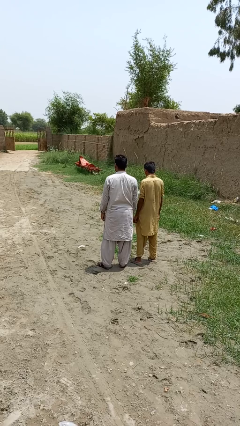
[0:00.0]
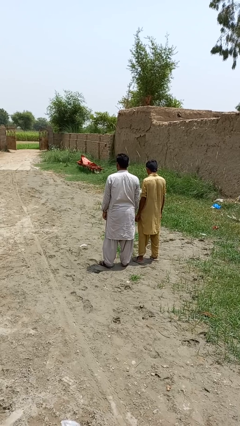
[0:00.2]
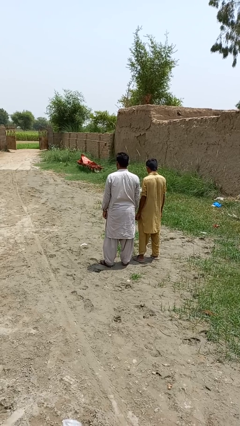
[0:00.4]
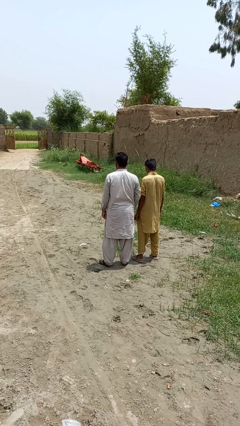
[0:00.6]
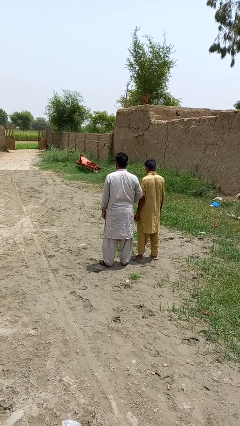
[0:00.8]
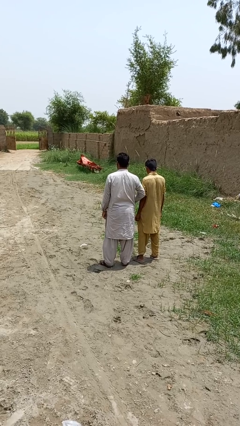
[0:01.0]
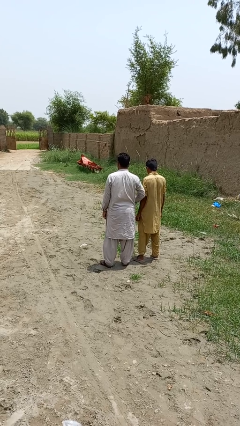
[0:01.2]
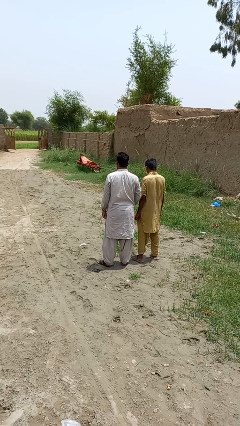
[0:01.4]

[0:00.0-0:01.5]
person nudges person with elbow

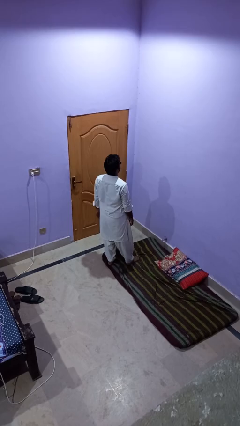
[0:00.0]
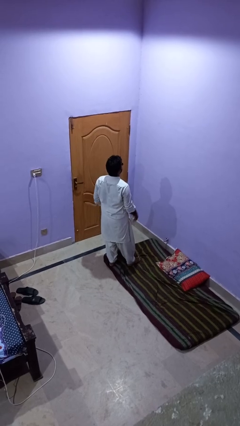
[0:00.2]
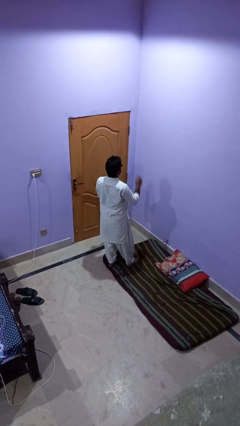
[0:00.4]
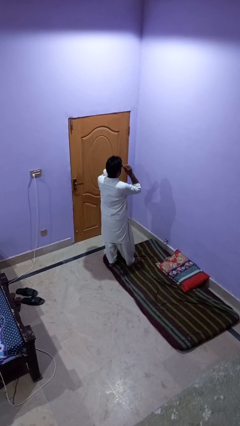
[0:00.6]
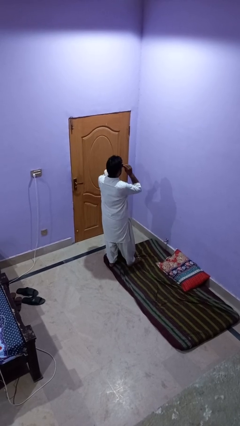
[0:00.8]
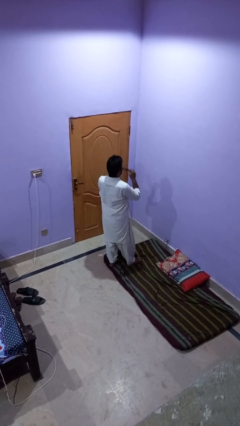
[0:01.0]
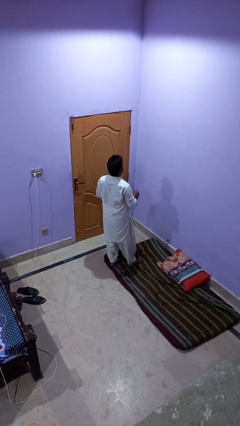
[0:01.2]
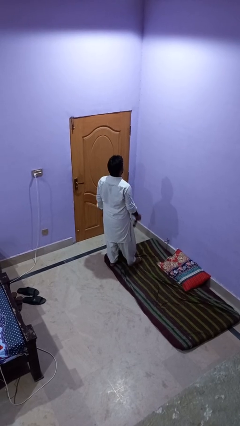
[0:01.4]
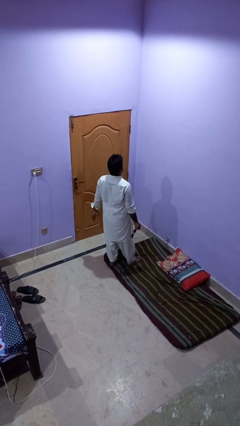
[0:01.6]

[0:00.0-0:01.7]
person takes off sunglasses

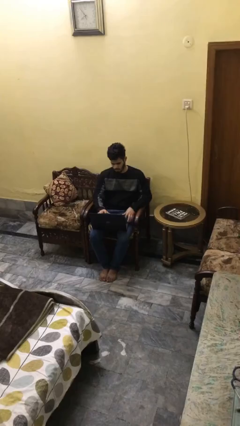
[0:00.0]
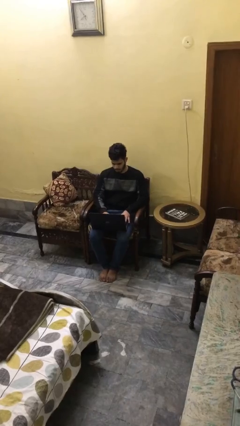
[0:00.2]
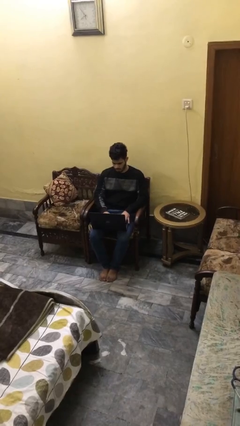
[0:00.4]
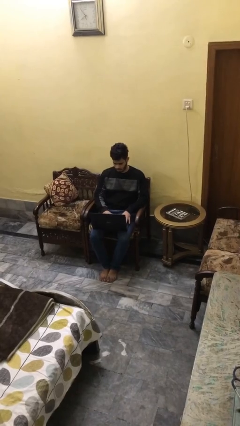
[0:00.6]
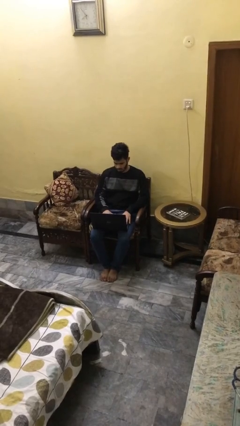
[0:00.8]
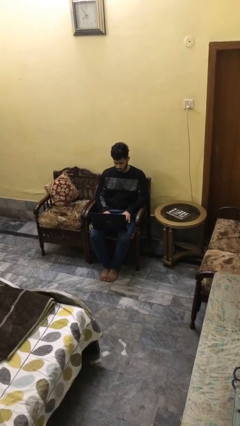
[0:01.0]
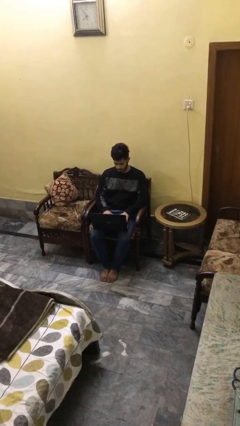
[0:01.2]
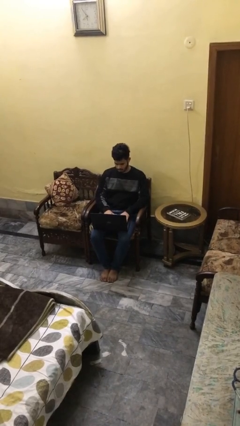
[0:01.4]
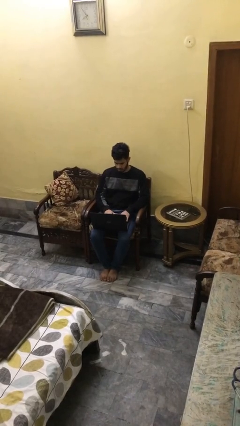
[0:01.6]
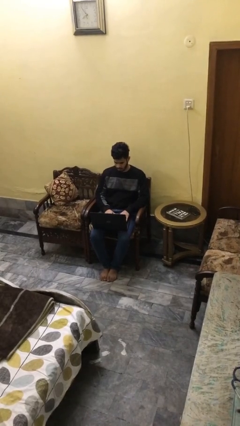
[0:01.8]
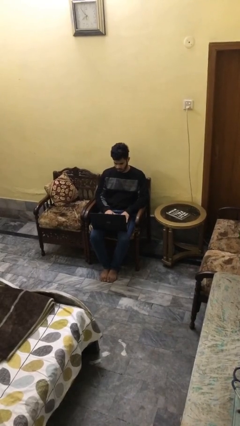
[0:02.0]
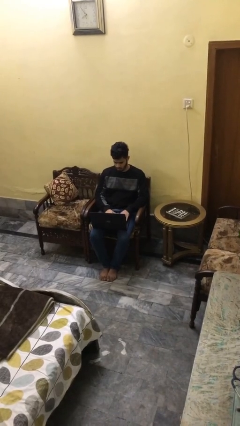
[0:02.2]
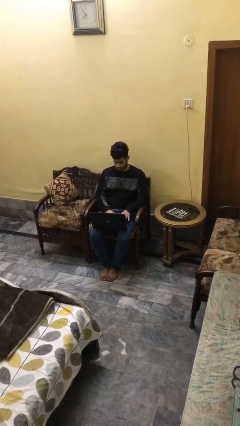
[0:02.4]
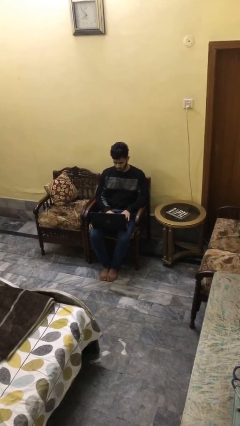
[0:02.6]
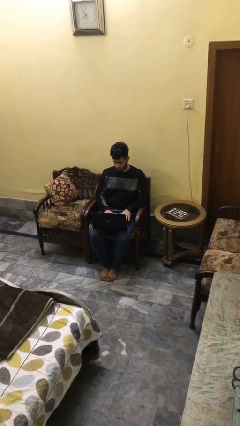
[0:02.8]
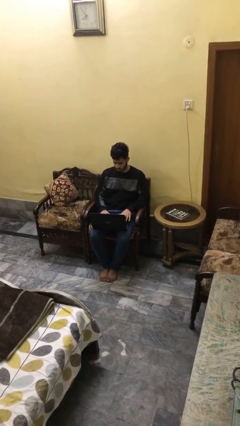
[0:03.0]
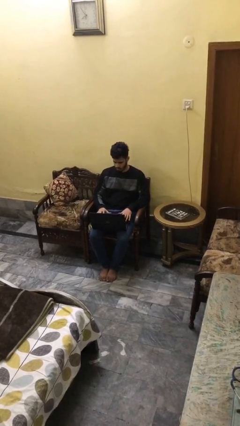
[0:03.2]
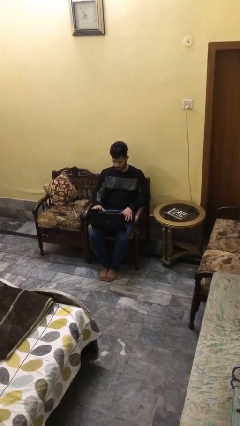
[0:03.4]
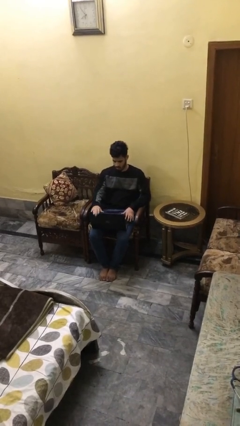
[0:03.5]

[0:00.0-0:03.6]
person interacts with laptop

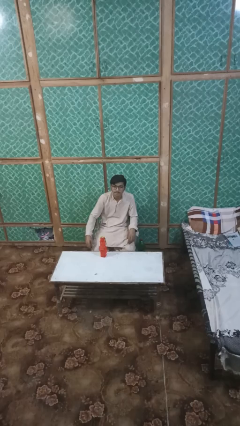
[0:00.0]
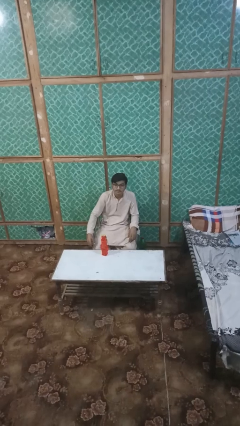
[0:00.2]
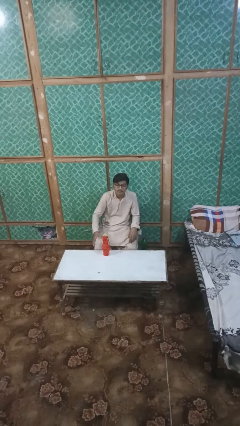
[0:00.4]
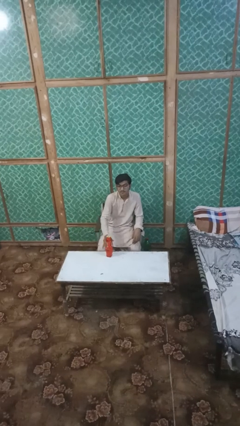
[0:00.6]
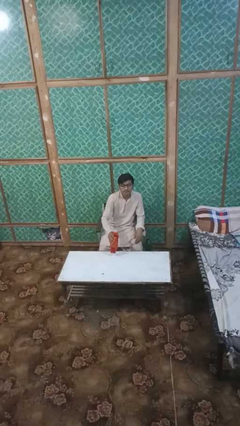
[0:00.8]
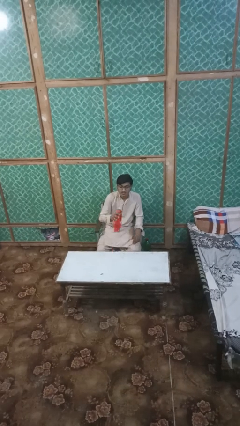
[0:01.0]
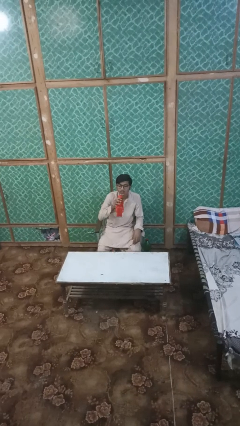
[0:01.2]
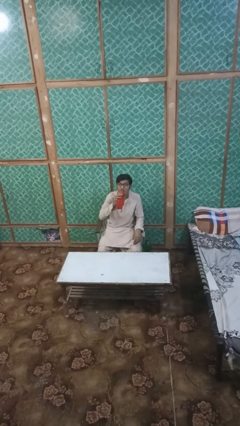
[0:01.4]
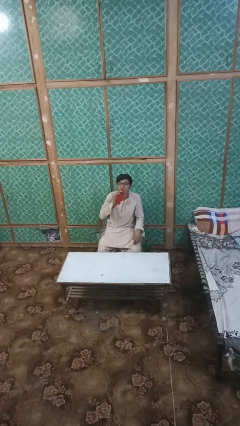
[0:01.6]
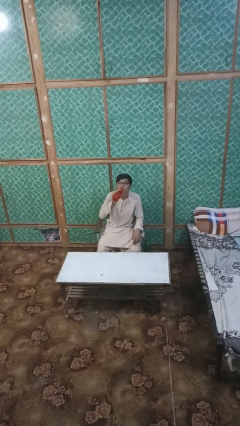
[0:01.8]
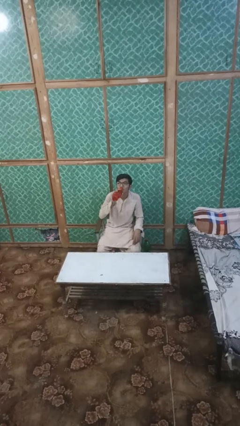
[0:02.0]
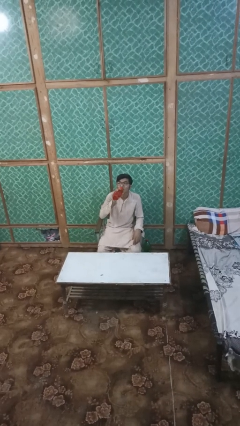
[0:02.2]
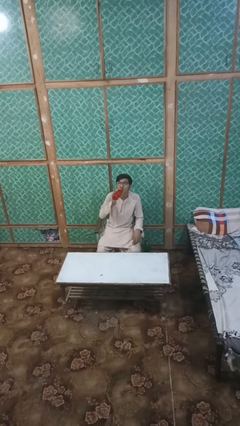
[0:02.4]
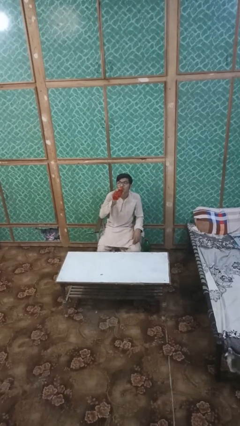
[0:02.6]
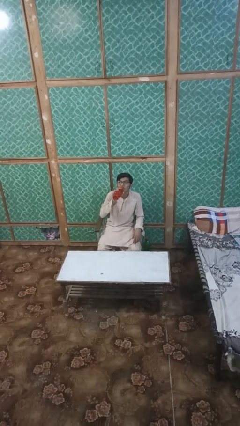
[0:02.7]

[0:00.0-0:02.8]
person drinks from bottle

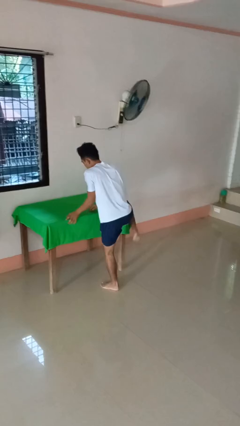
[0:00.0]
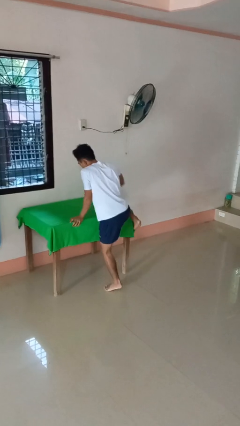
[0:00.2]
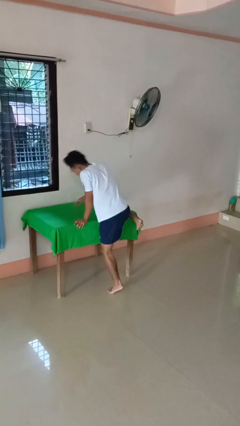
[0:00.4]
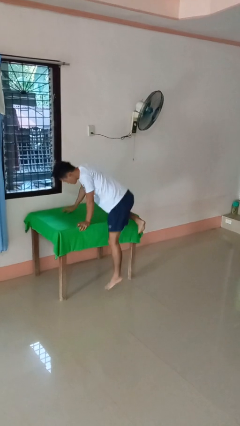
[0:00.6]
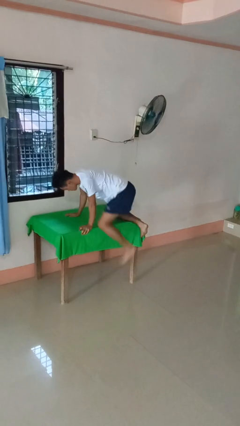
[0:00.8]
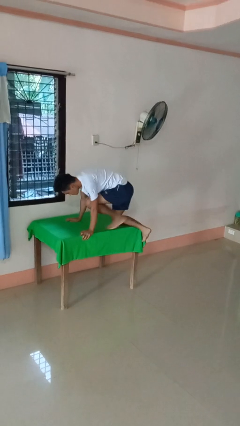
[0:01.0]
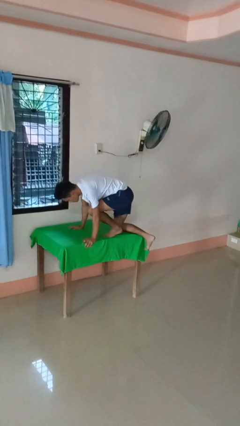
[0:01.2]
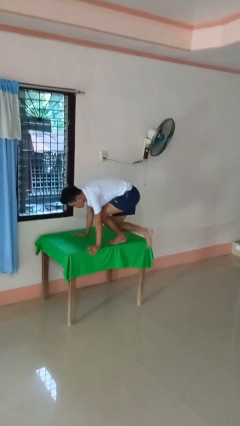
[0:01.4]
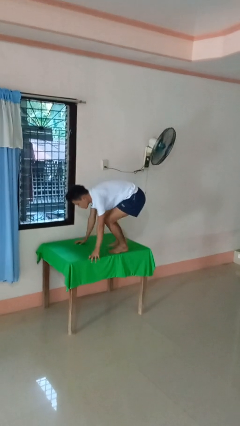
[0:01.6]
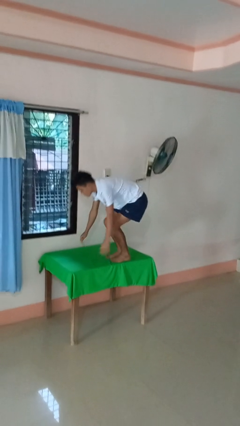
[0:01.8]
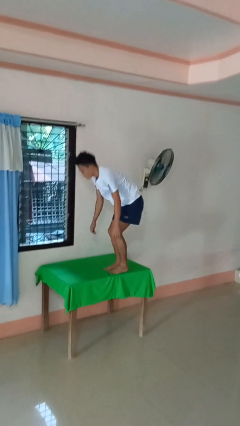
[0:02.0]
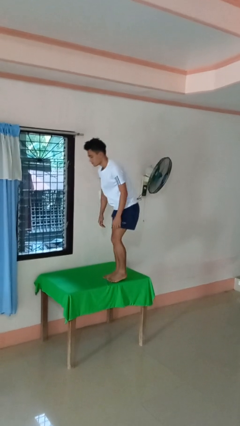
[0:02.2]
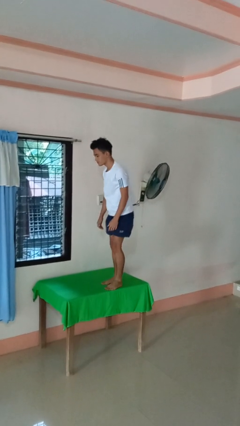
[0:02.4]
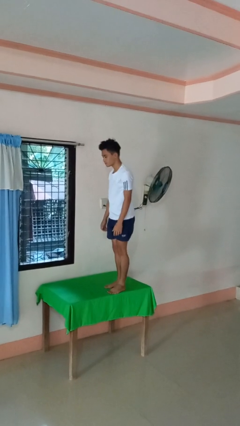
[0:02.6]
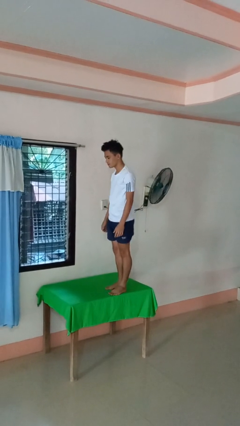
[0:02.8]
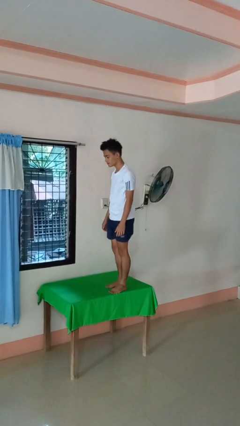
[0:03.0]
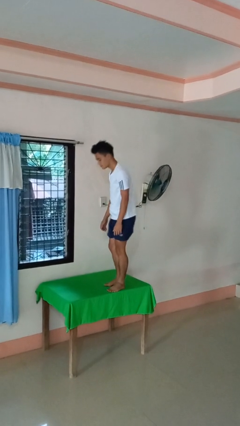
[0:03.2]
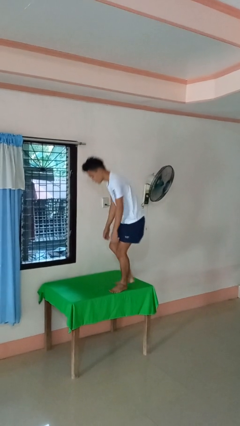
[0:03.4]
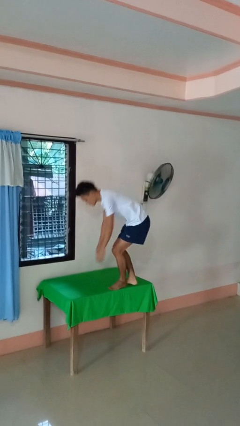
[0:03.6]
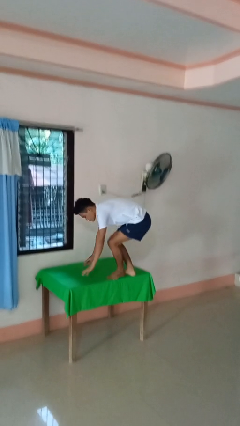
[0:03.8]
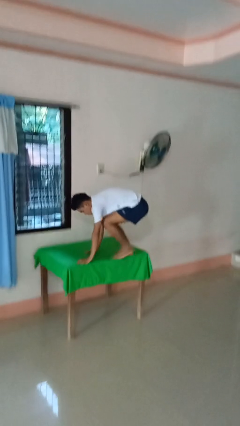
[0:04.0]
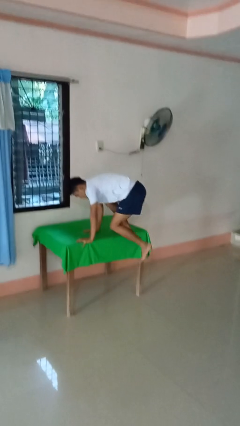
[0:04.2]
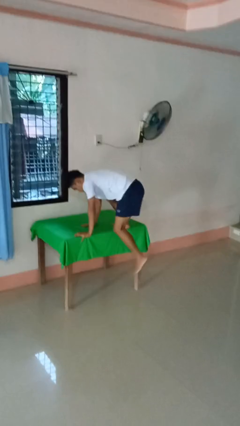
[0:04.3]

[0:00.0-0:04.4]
person climbs on table

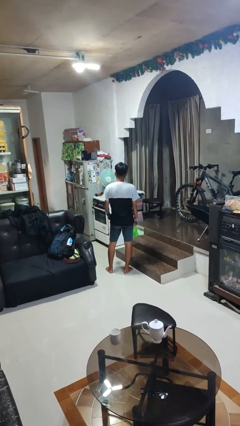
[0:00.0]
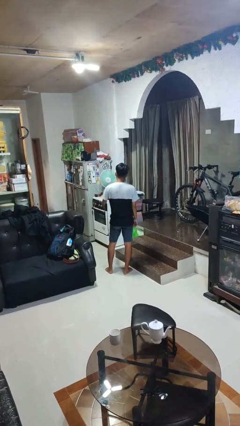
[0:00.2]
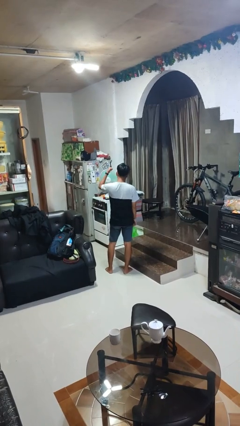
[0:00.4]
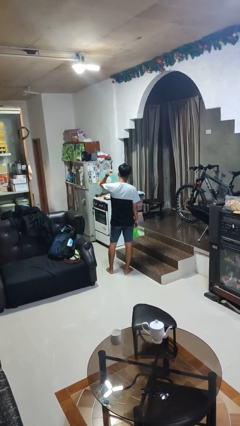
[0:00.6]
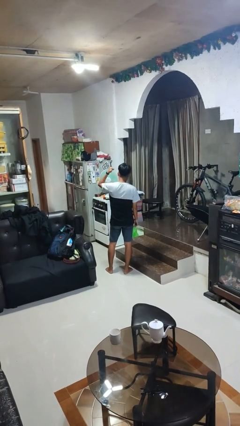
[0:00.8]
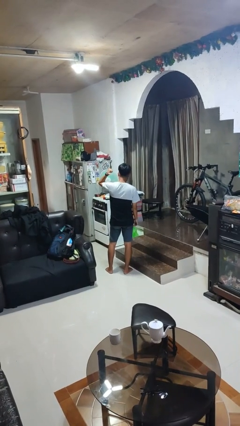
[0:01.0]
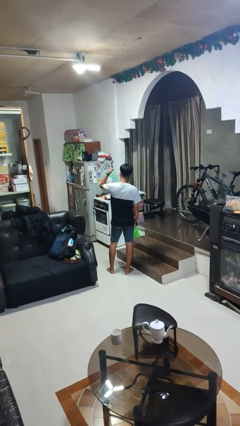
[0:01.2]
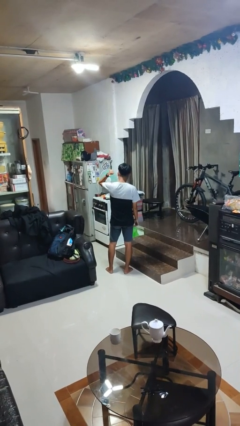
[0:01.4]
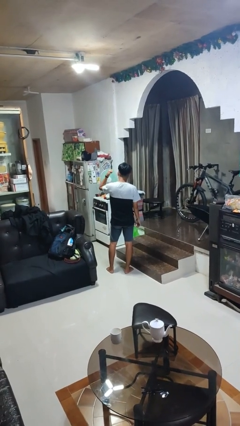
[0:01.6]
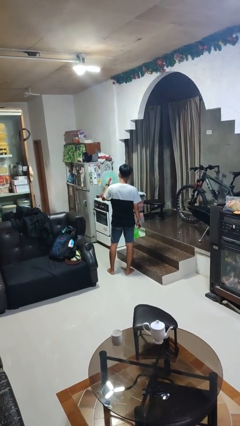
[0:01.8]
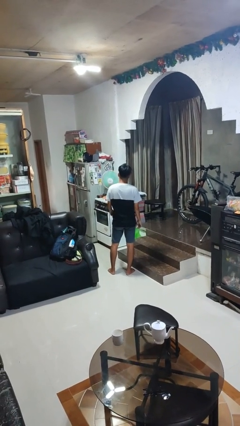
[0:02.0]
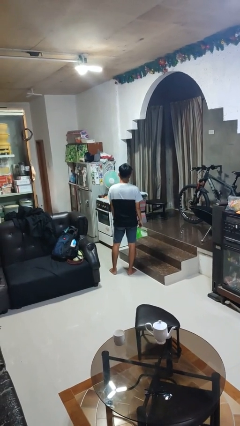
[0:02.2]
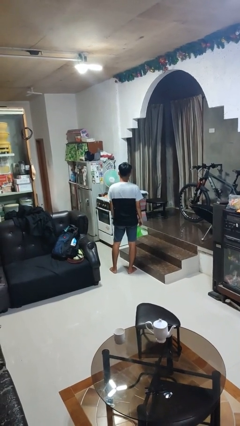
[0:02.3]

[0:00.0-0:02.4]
person gestures behind me

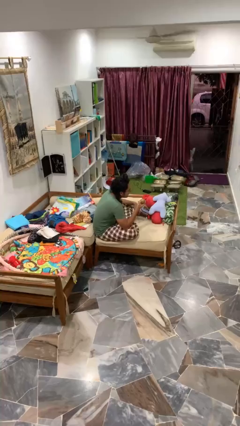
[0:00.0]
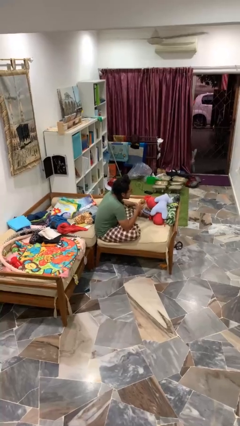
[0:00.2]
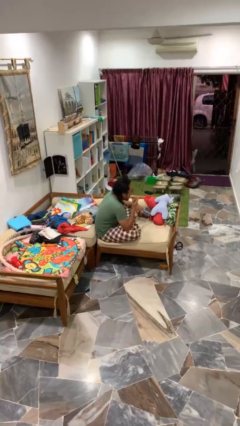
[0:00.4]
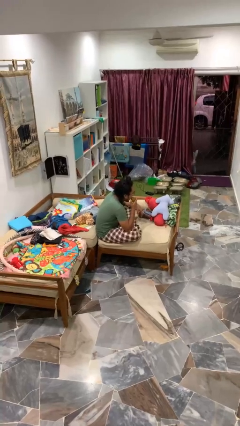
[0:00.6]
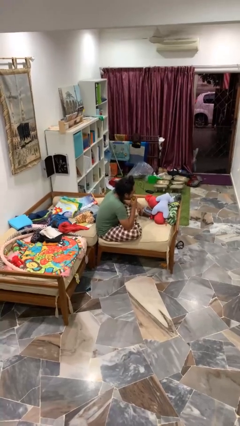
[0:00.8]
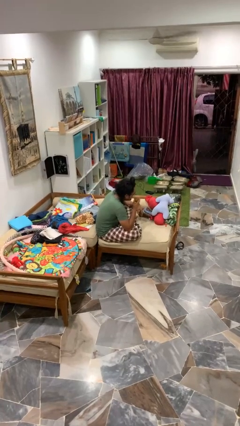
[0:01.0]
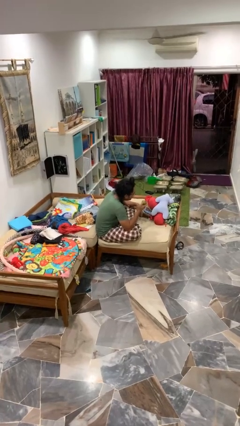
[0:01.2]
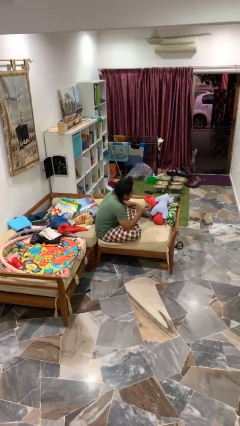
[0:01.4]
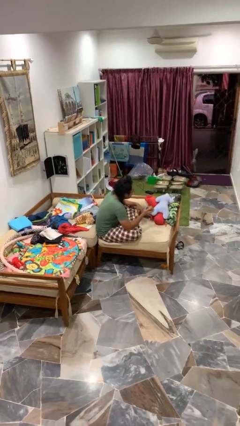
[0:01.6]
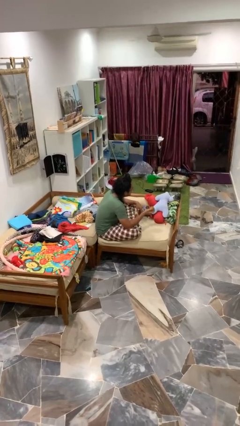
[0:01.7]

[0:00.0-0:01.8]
person eats apple
